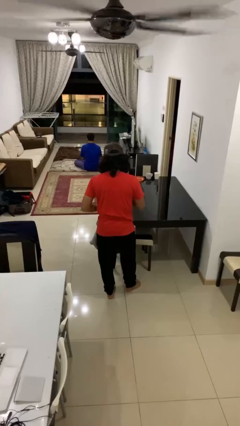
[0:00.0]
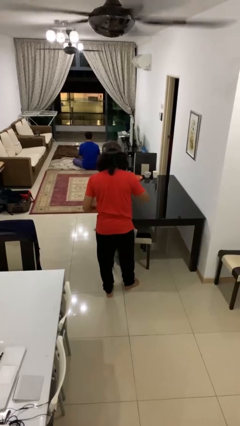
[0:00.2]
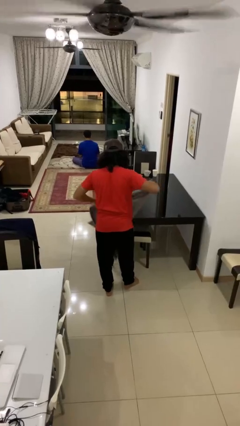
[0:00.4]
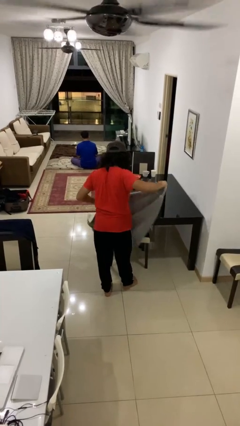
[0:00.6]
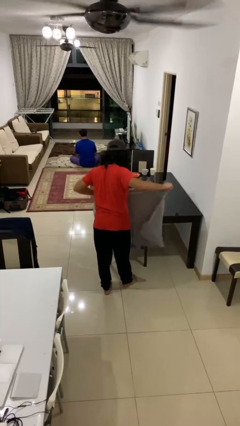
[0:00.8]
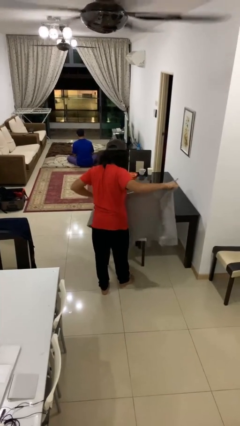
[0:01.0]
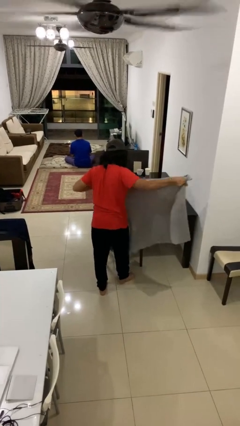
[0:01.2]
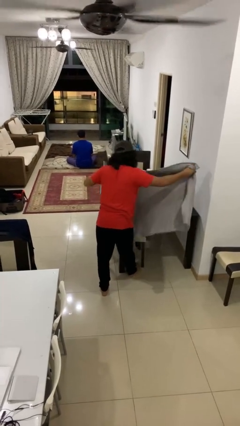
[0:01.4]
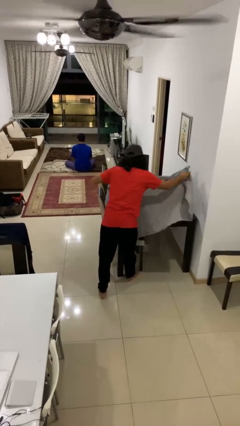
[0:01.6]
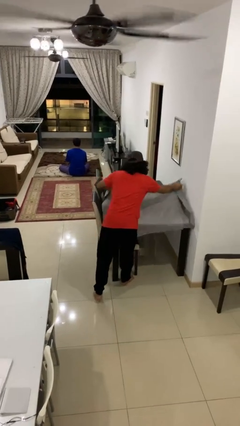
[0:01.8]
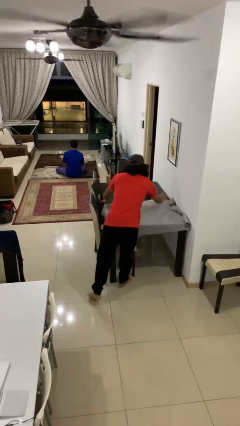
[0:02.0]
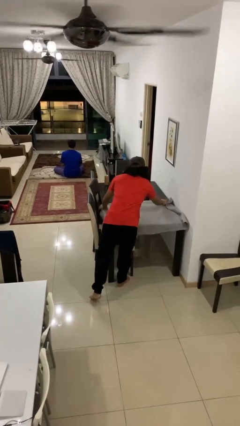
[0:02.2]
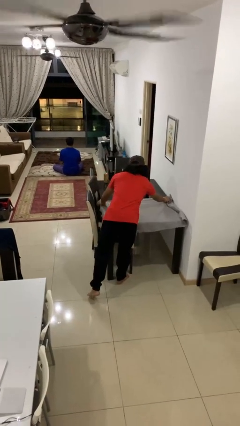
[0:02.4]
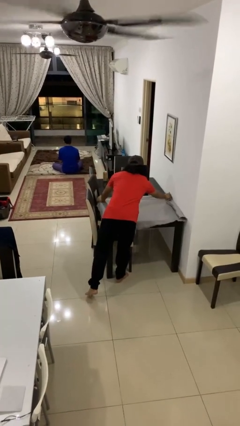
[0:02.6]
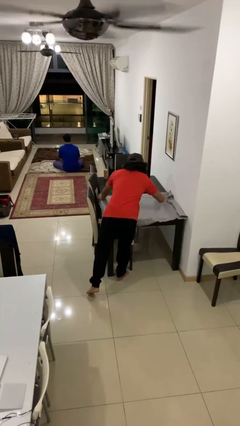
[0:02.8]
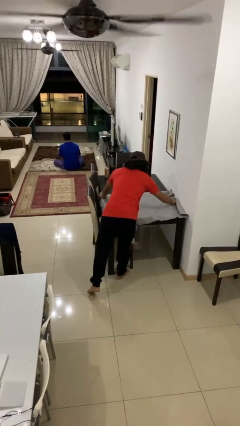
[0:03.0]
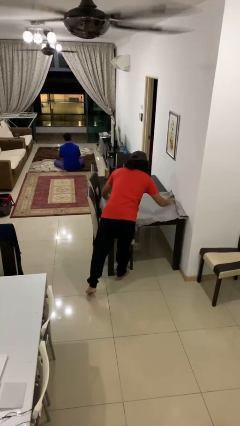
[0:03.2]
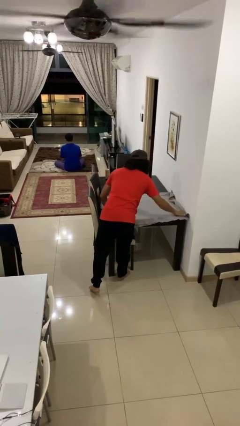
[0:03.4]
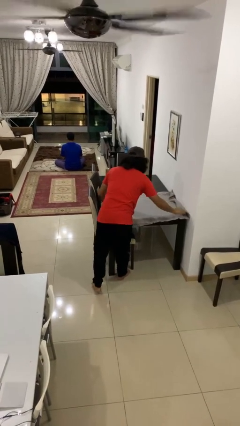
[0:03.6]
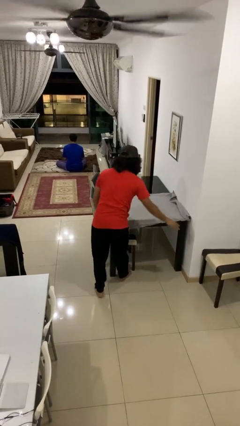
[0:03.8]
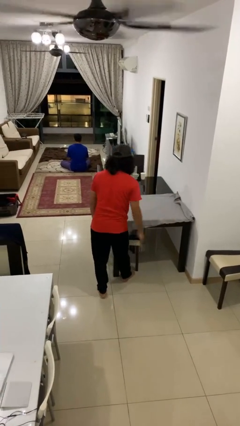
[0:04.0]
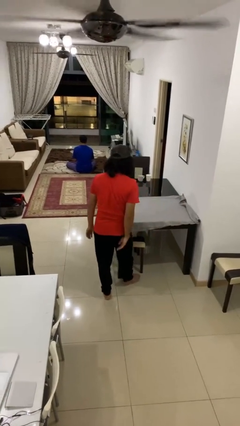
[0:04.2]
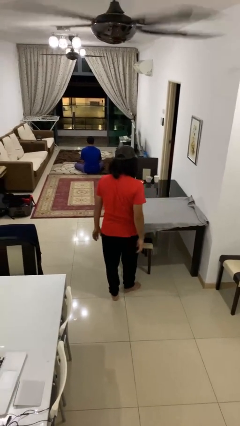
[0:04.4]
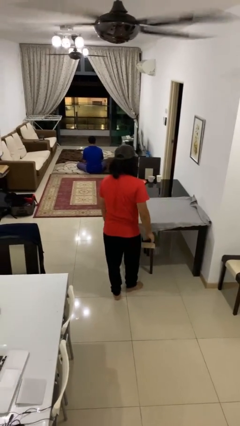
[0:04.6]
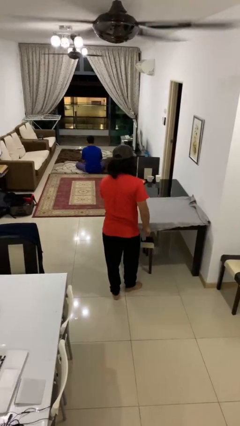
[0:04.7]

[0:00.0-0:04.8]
person spreads tablecloth

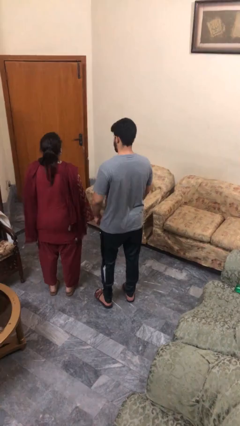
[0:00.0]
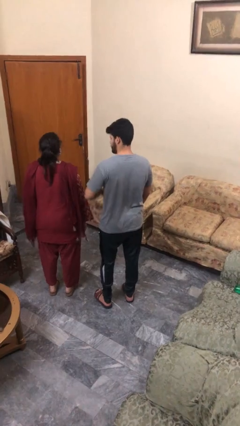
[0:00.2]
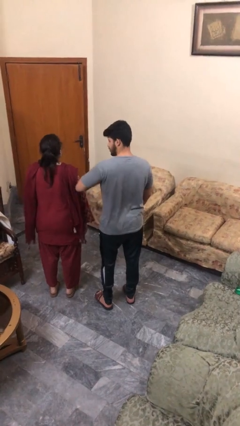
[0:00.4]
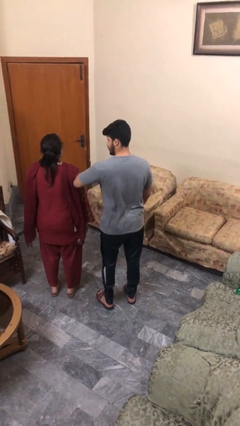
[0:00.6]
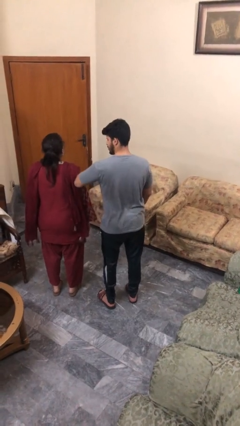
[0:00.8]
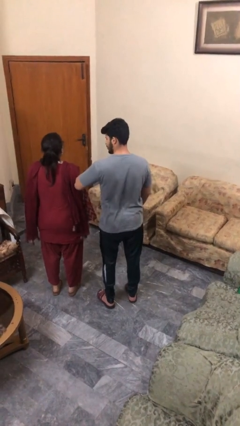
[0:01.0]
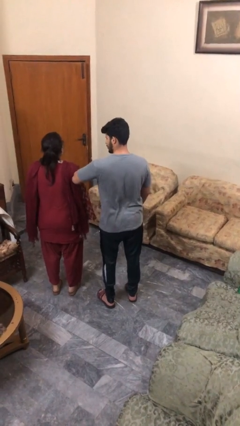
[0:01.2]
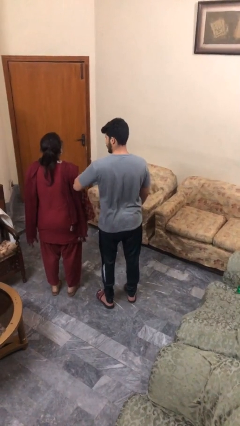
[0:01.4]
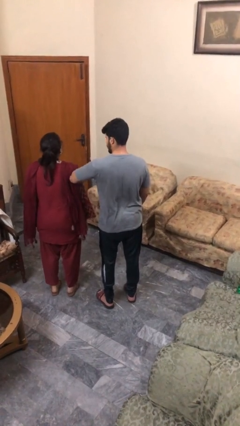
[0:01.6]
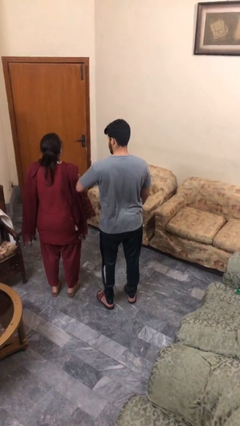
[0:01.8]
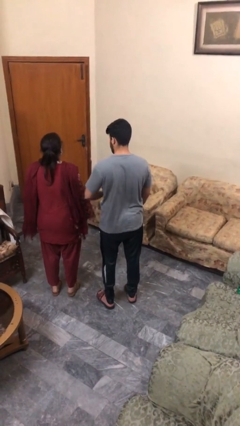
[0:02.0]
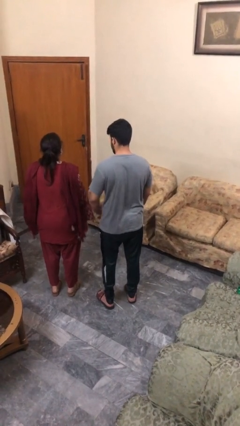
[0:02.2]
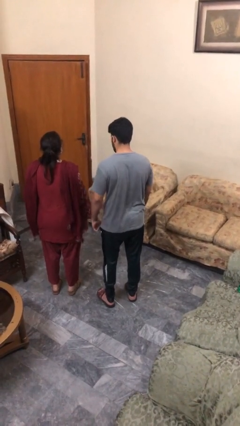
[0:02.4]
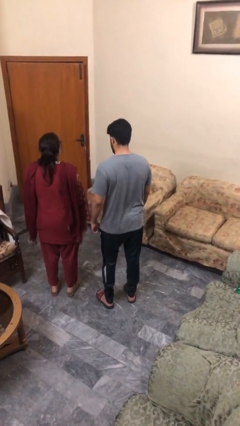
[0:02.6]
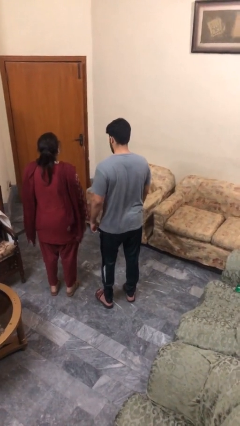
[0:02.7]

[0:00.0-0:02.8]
person nudges person with elbow

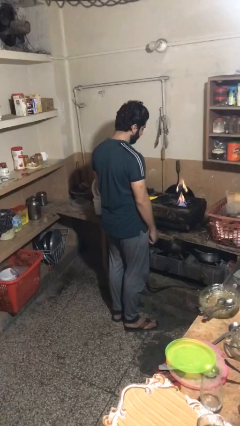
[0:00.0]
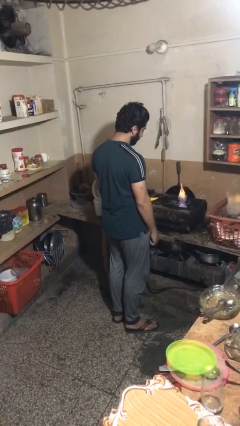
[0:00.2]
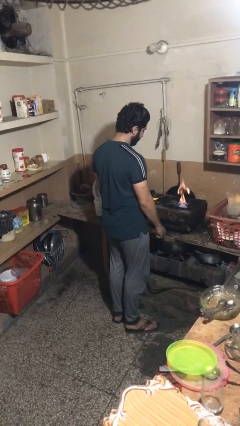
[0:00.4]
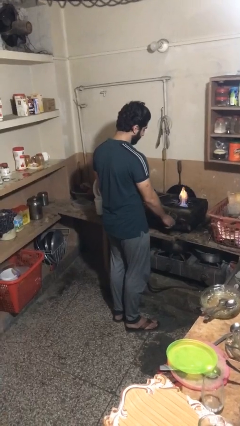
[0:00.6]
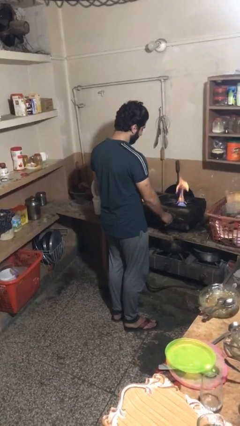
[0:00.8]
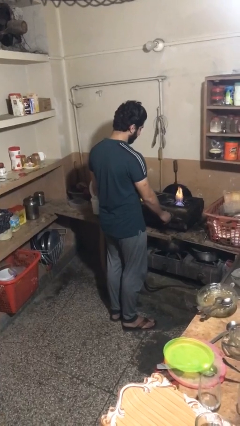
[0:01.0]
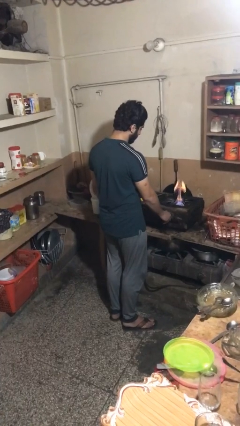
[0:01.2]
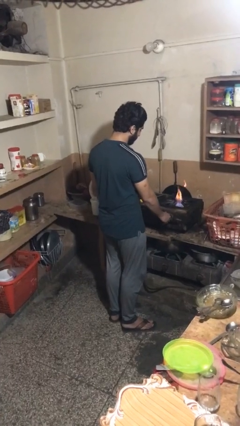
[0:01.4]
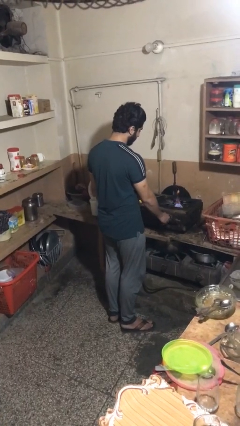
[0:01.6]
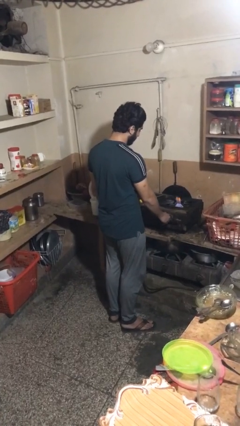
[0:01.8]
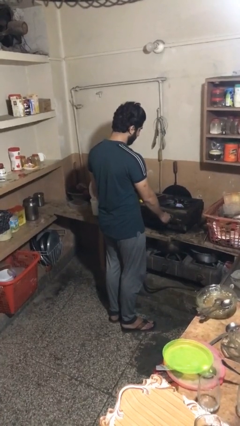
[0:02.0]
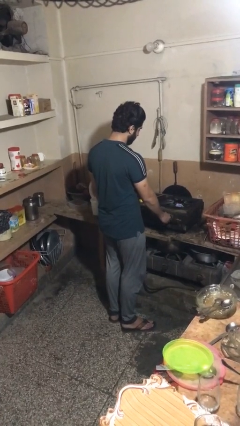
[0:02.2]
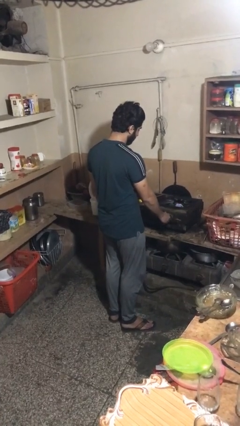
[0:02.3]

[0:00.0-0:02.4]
person turns off stovetop

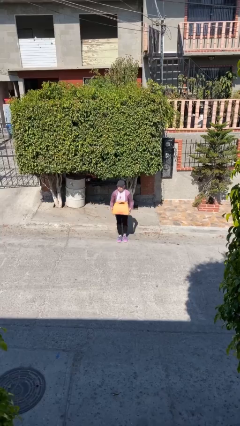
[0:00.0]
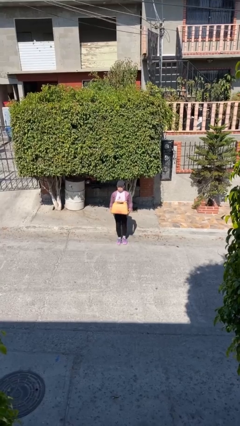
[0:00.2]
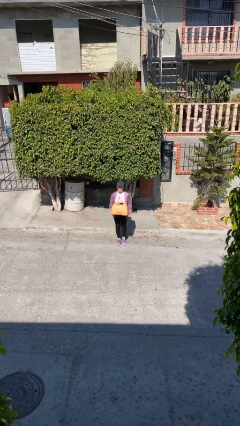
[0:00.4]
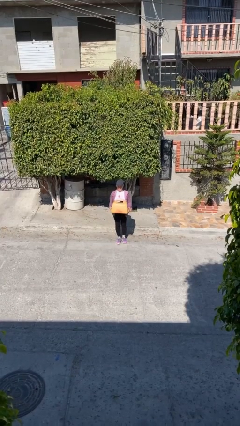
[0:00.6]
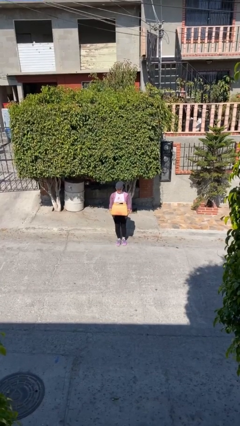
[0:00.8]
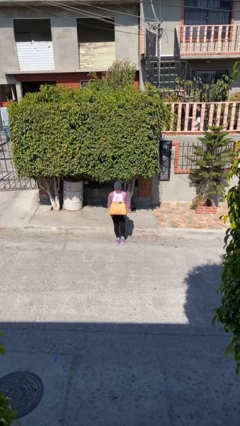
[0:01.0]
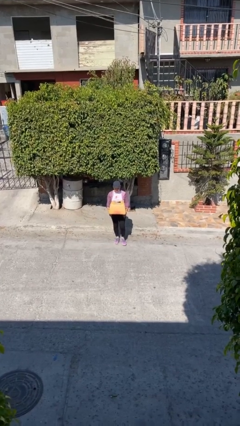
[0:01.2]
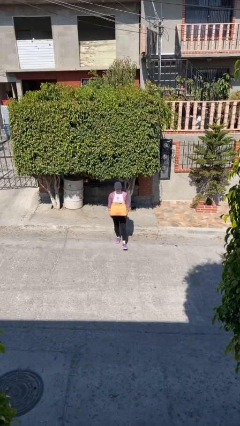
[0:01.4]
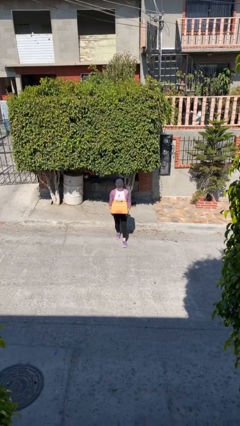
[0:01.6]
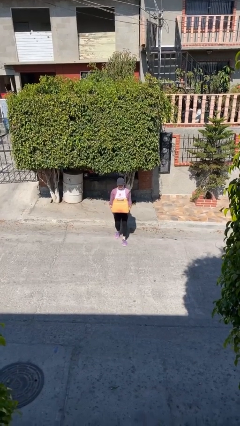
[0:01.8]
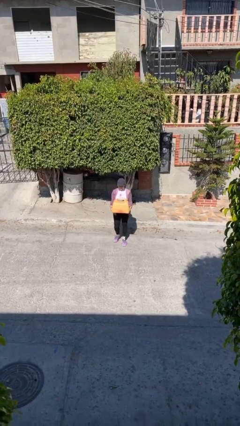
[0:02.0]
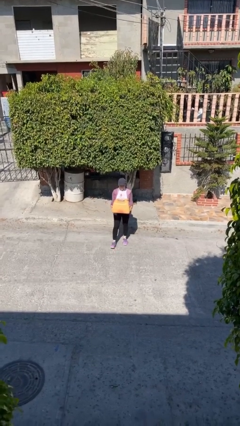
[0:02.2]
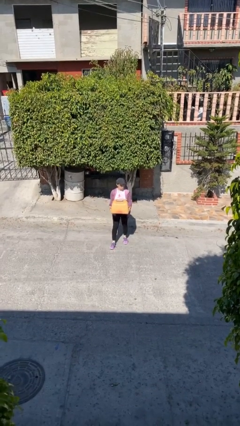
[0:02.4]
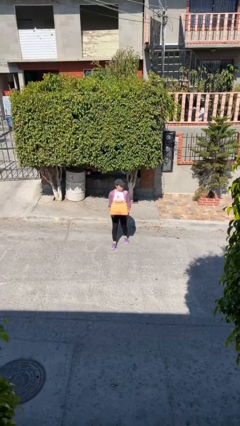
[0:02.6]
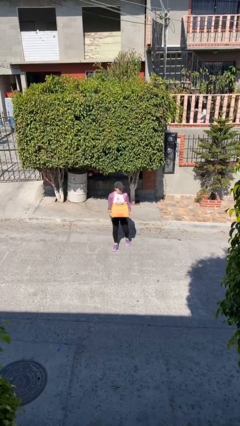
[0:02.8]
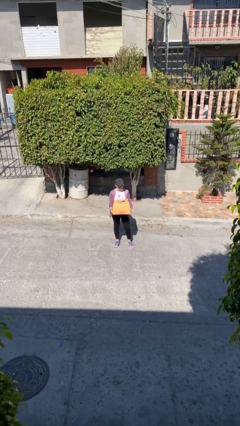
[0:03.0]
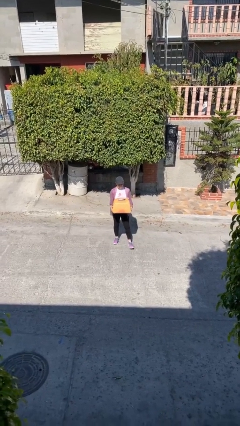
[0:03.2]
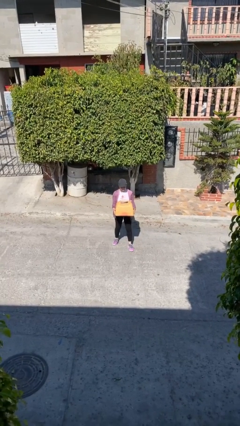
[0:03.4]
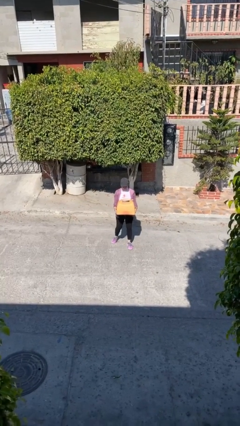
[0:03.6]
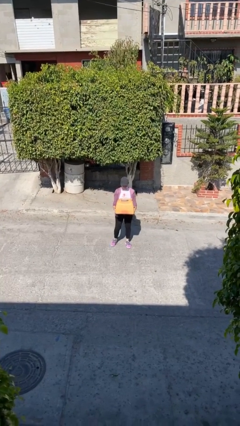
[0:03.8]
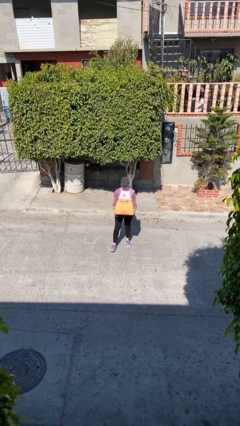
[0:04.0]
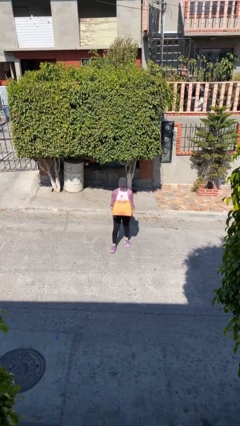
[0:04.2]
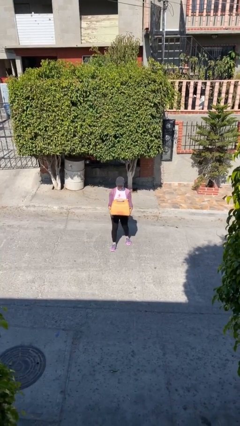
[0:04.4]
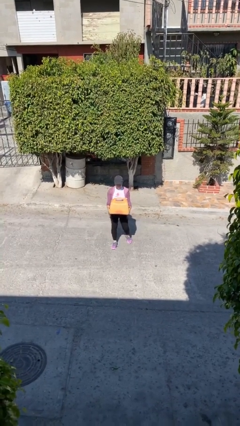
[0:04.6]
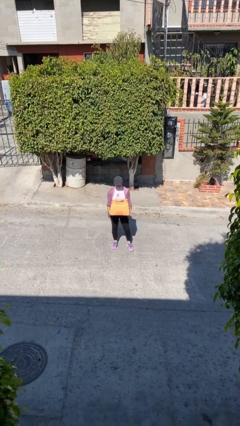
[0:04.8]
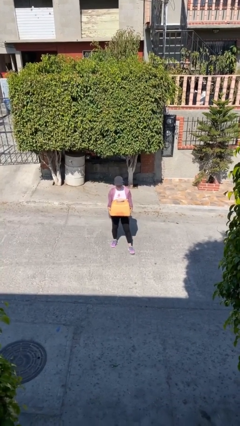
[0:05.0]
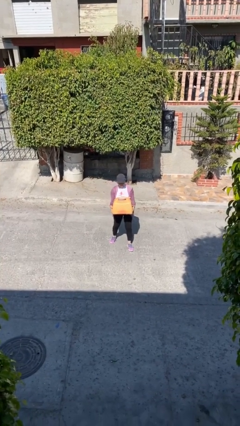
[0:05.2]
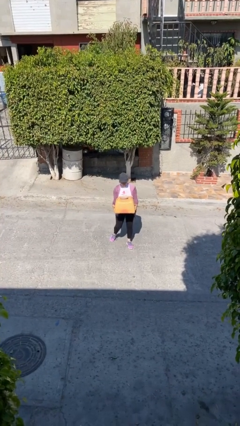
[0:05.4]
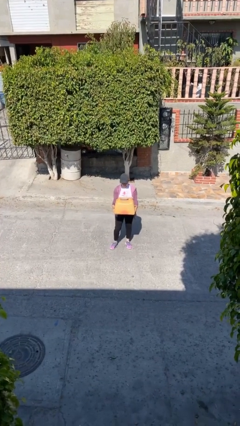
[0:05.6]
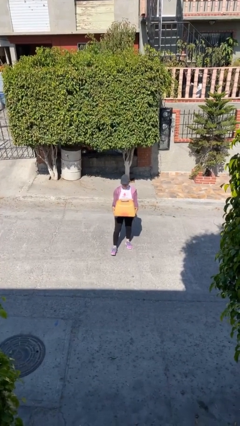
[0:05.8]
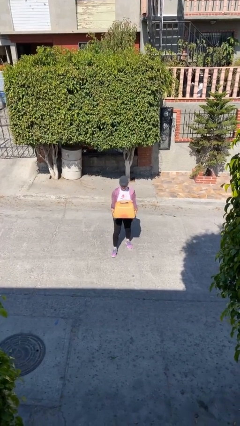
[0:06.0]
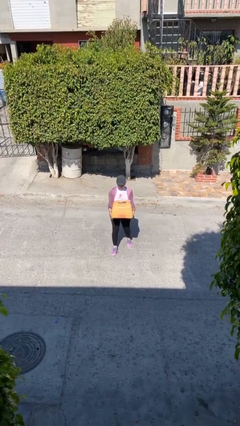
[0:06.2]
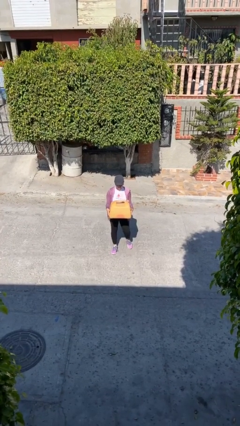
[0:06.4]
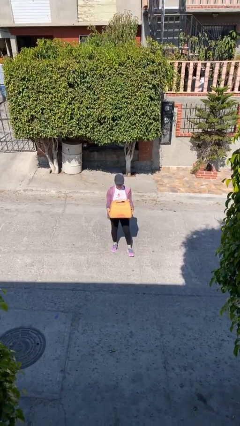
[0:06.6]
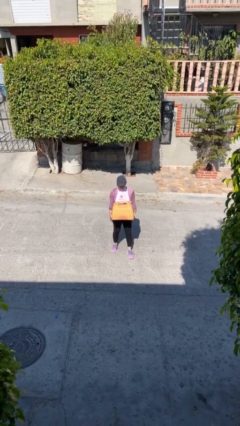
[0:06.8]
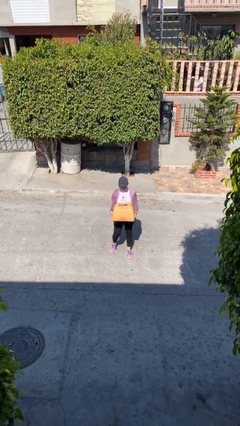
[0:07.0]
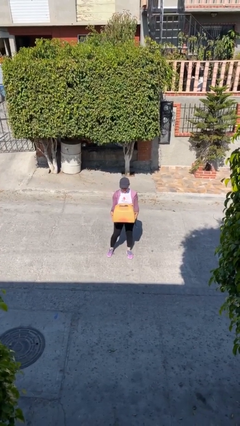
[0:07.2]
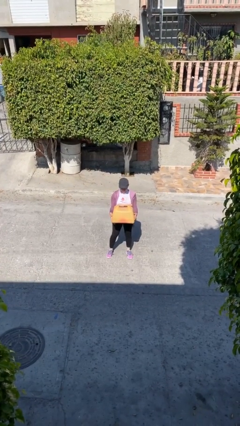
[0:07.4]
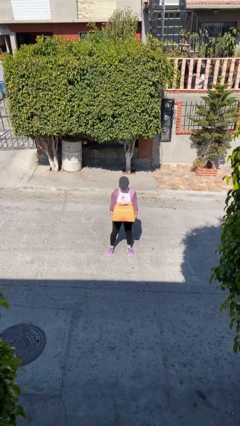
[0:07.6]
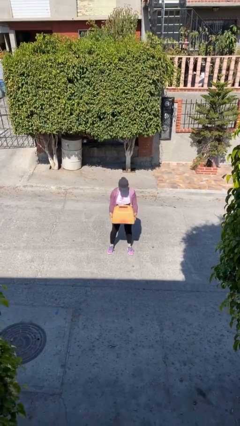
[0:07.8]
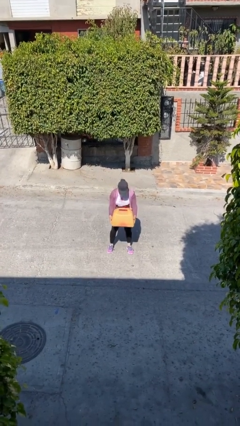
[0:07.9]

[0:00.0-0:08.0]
person carries heavy object
